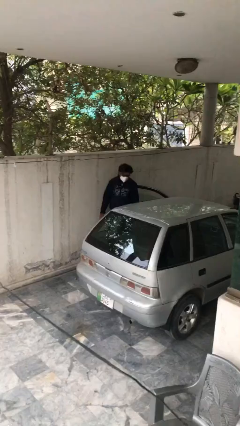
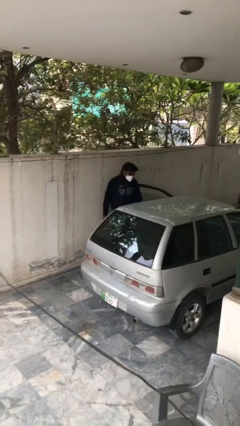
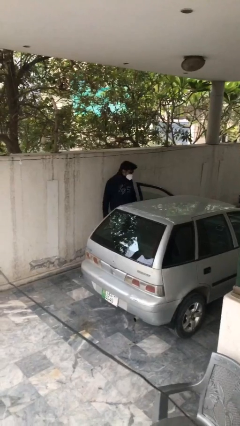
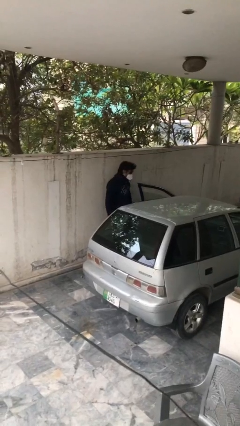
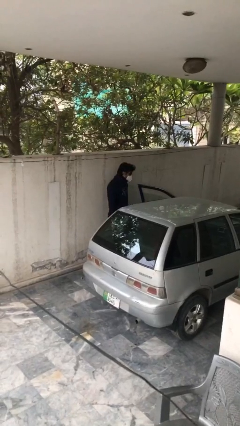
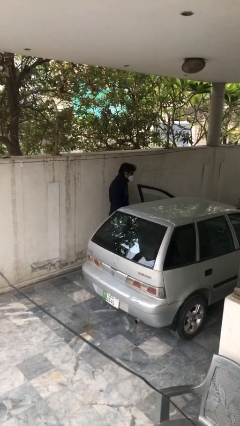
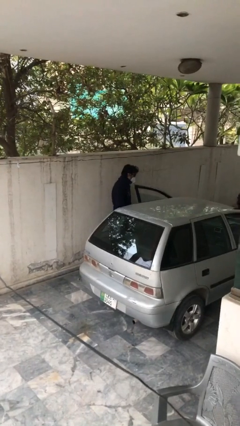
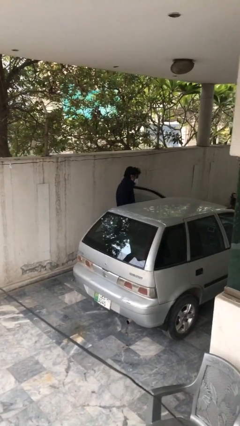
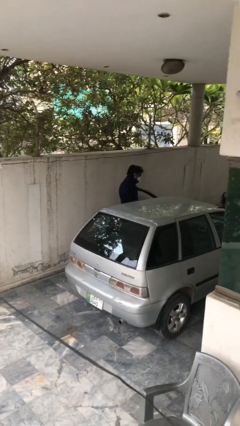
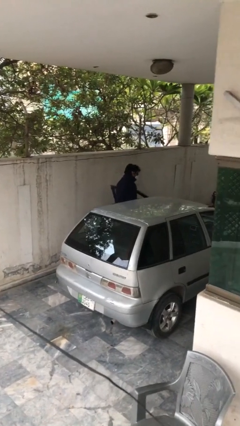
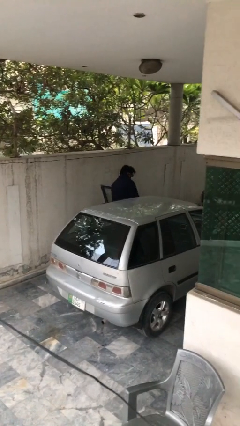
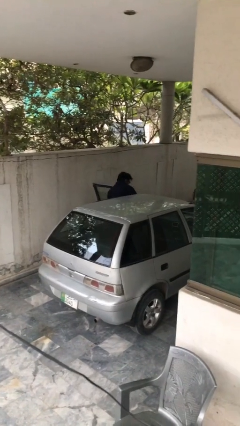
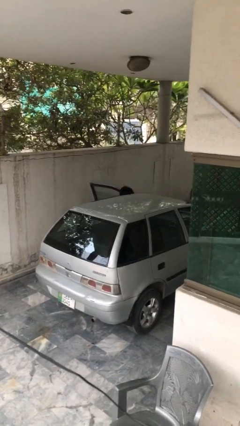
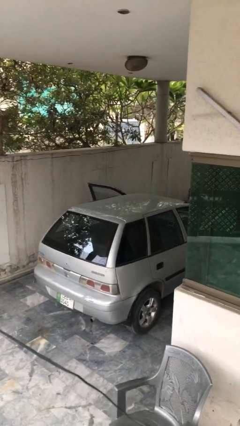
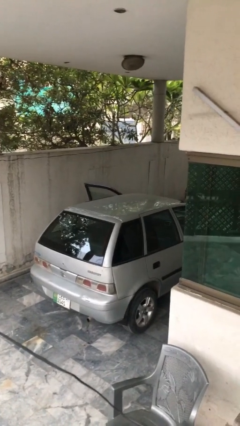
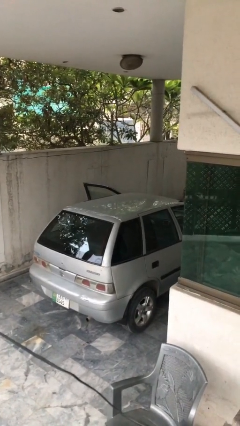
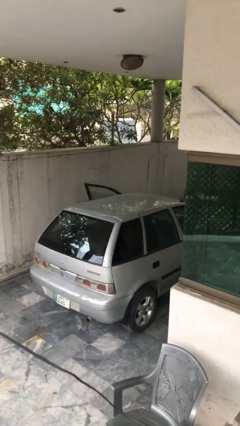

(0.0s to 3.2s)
person enters car

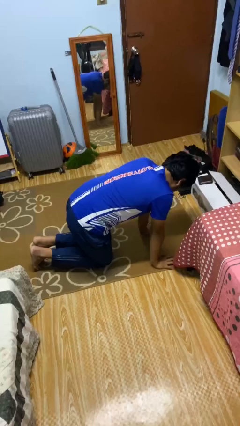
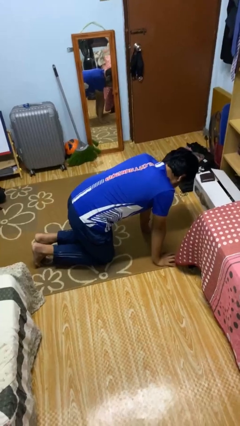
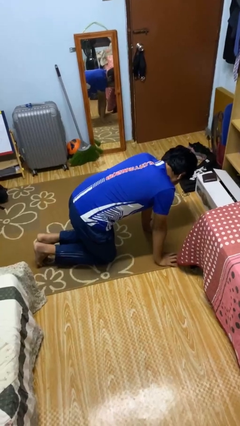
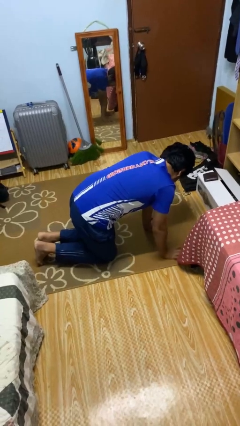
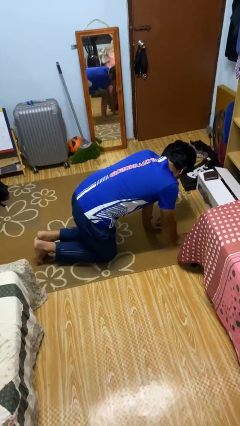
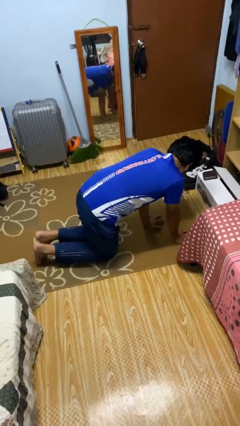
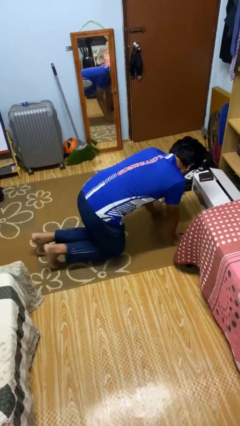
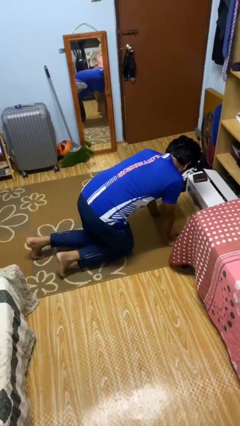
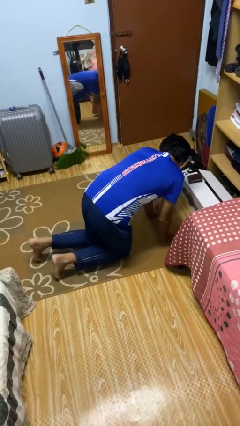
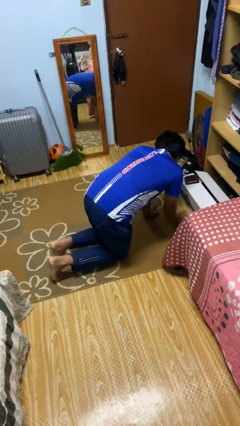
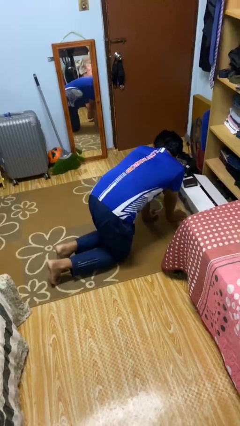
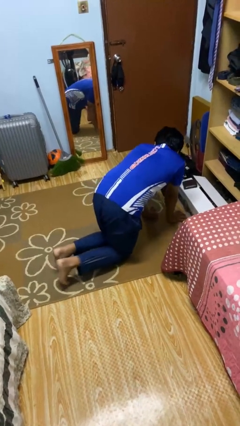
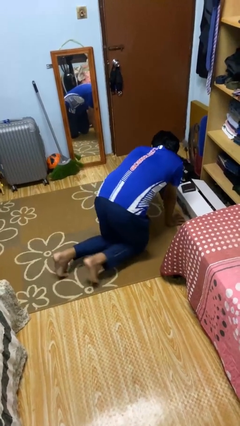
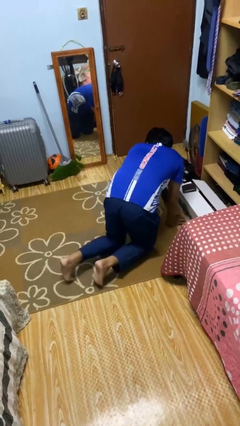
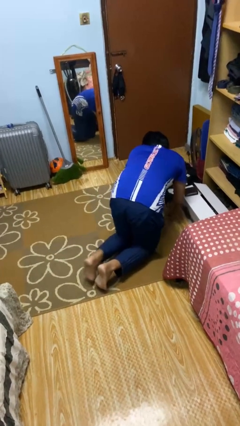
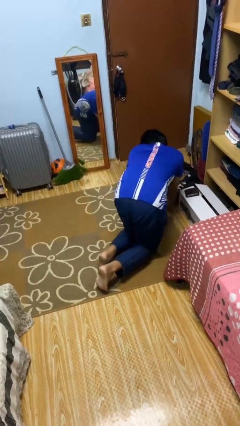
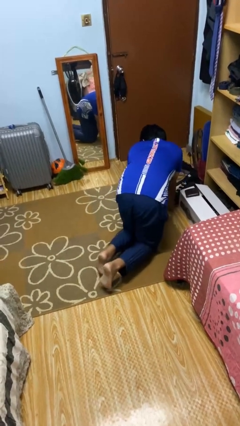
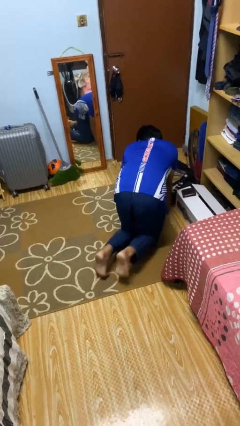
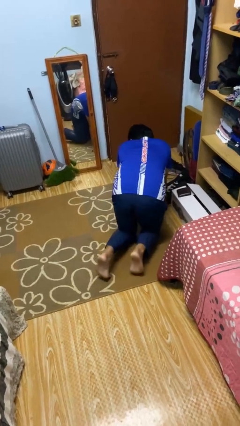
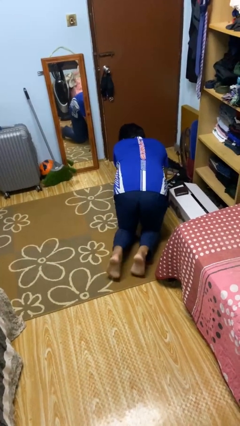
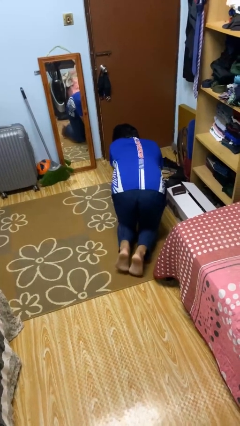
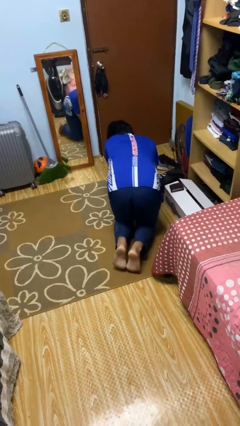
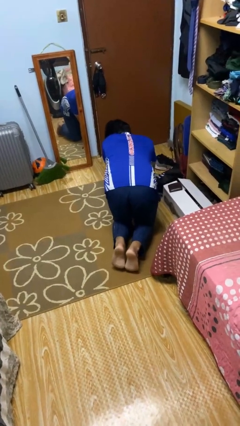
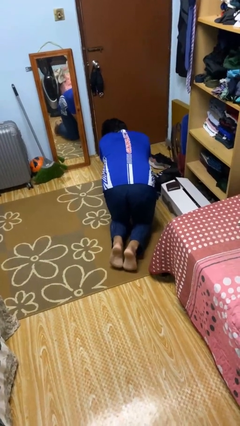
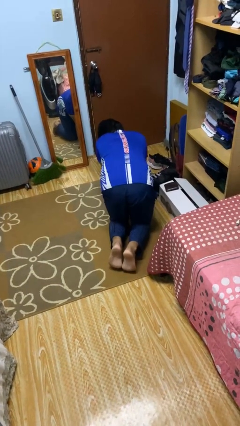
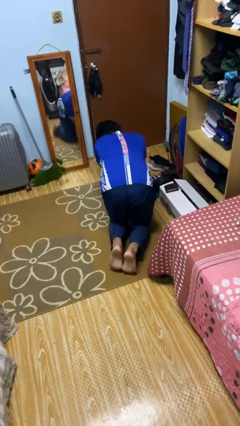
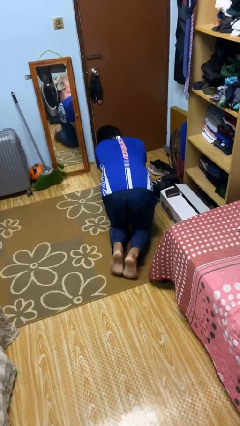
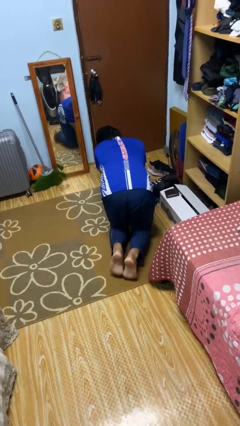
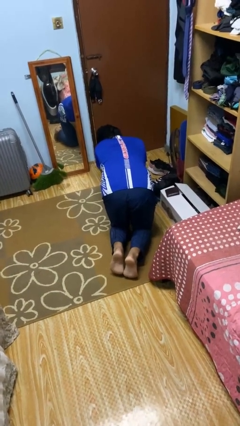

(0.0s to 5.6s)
person crawls

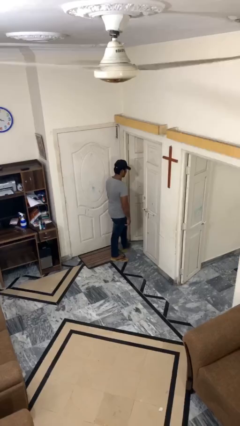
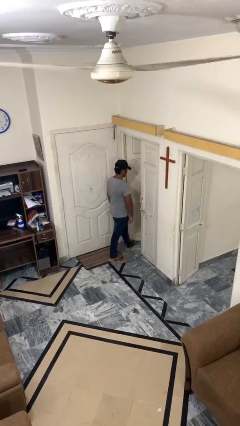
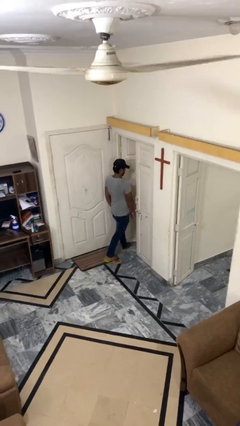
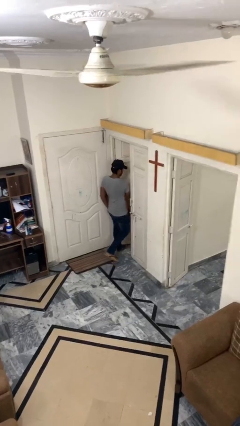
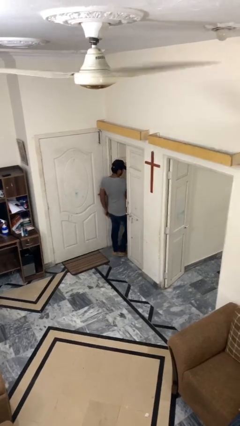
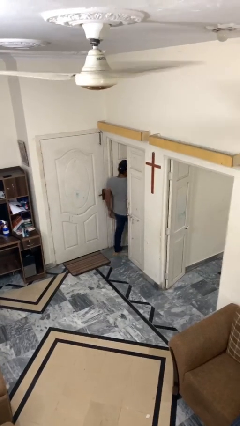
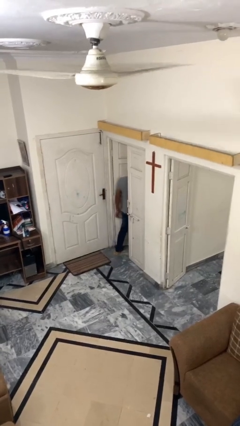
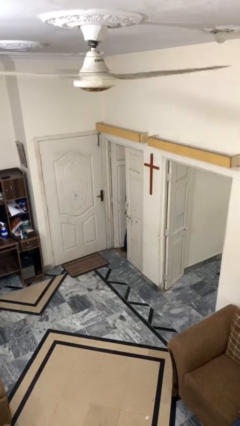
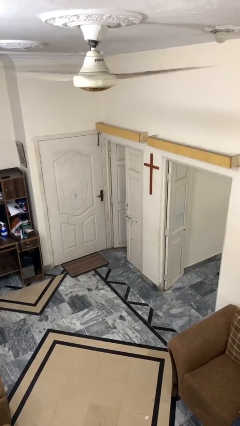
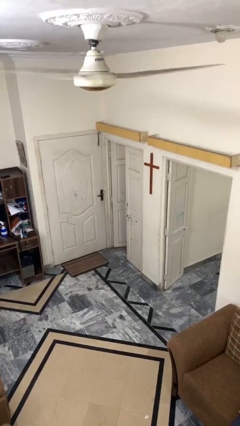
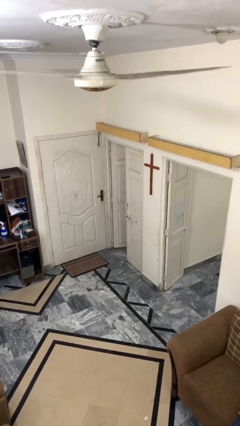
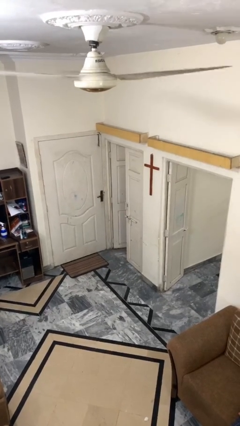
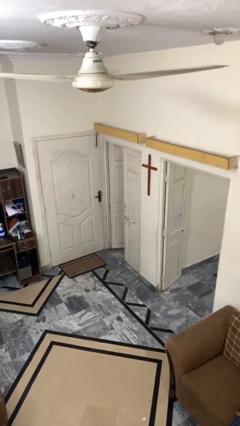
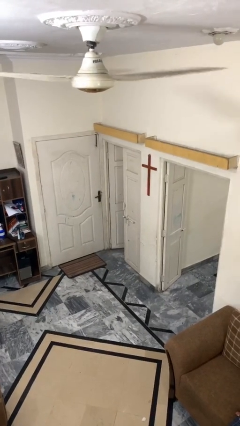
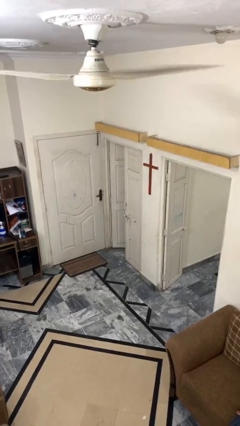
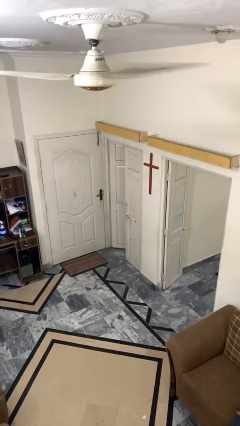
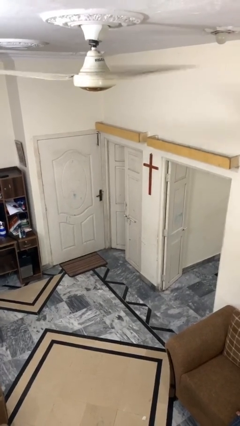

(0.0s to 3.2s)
person exits scene through structure

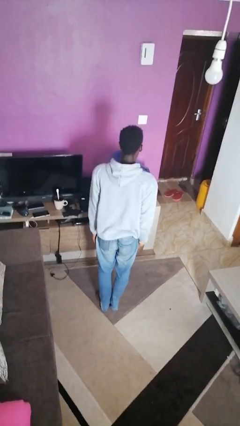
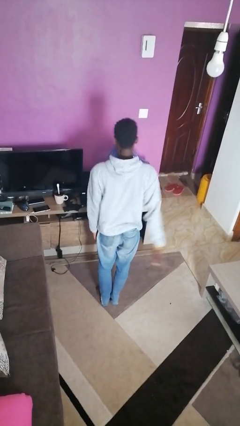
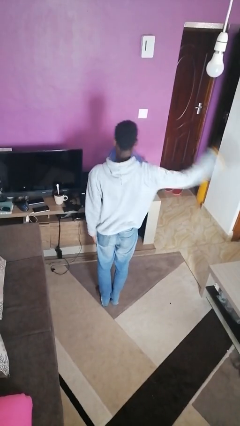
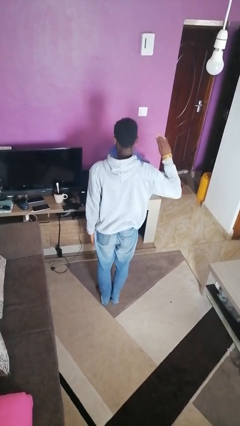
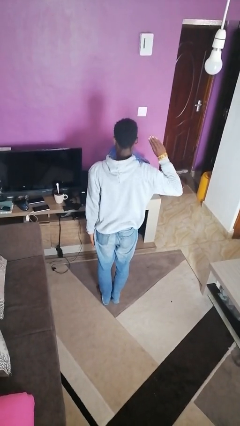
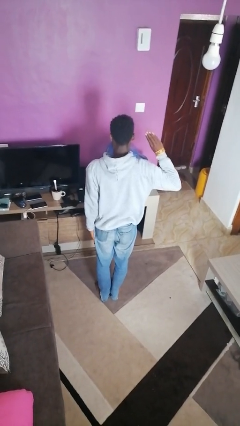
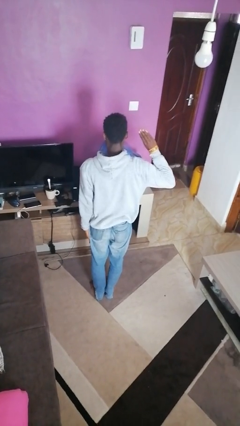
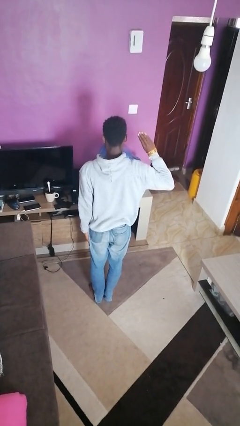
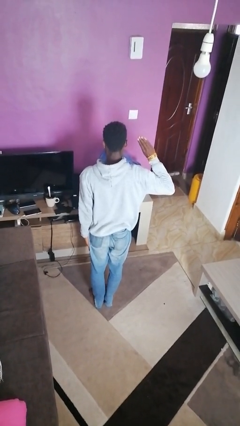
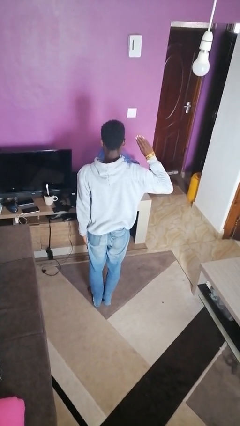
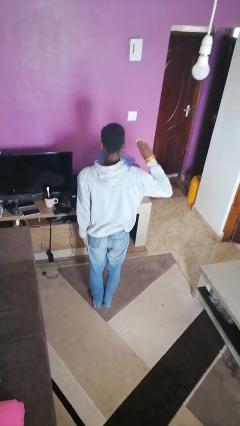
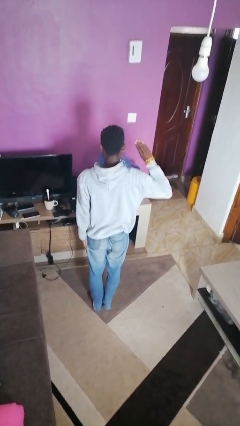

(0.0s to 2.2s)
person salutes

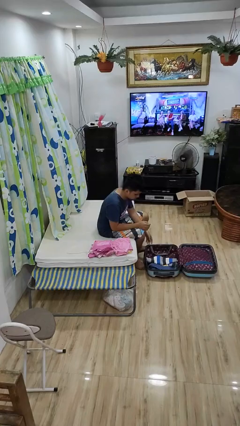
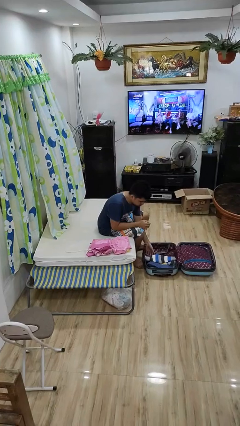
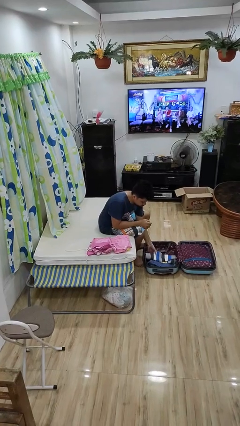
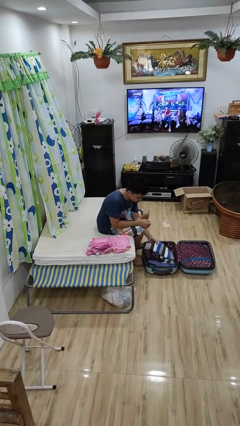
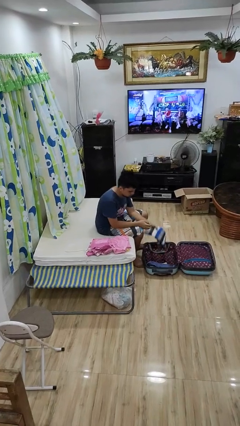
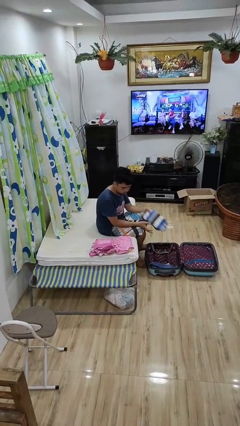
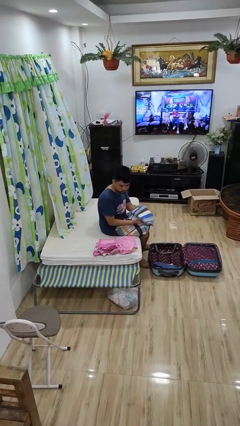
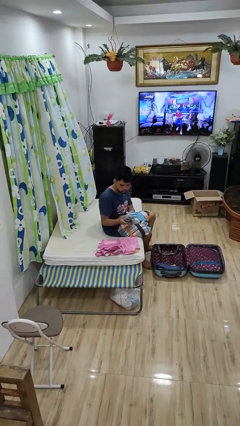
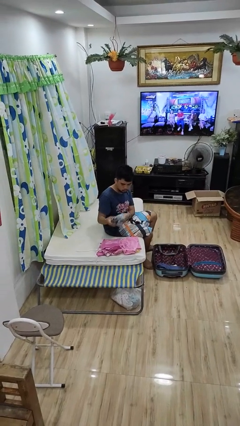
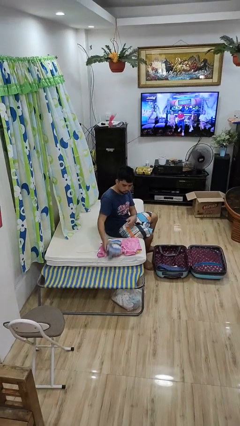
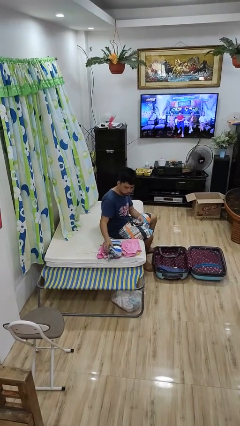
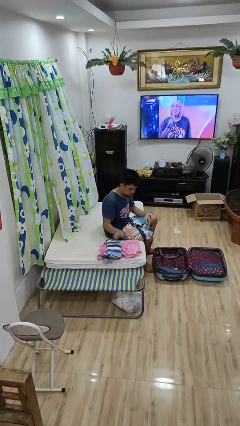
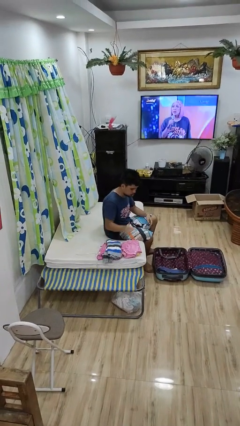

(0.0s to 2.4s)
person unloads clothes from suitcase

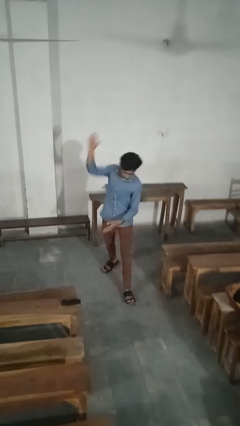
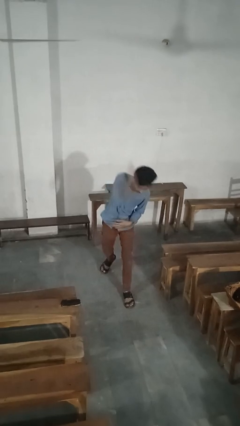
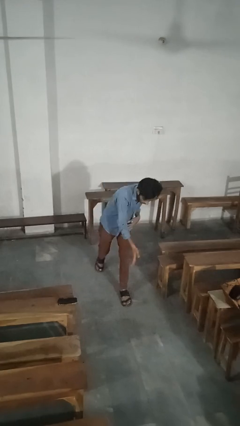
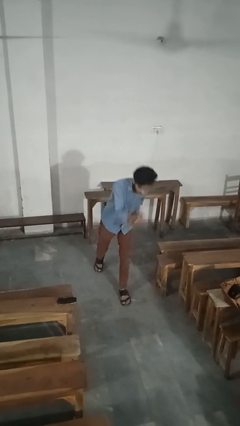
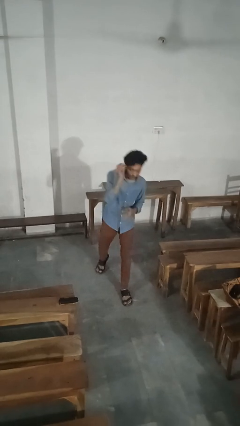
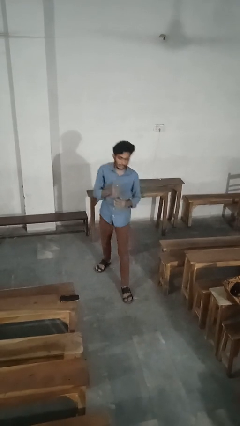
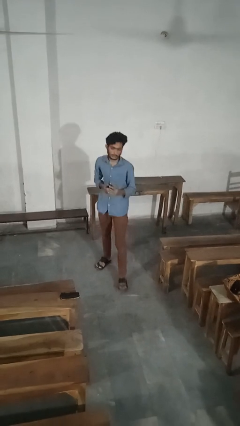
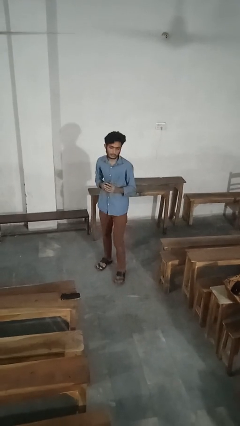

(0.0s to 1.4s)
person karate chop
